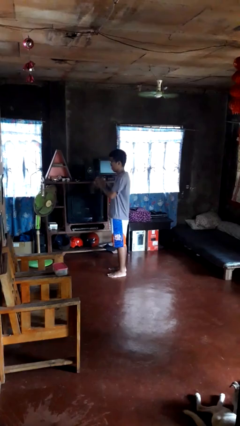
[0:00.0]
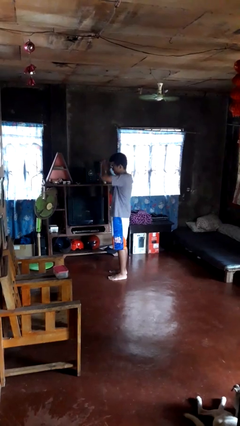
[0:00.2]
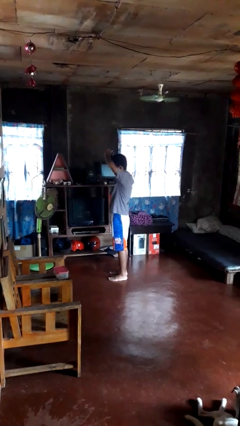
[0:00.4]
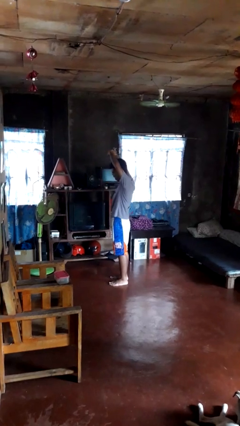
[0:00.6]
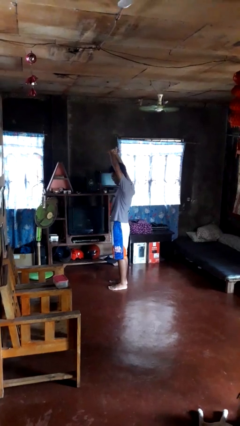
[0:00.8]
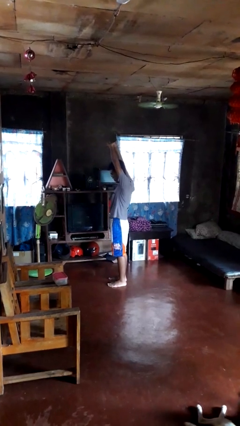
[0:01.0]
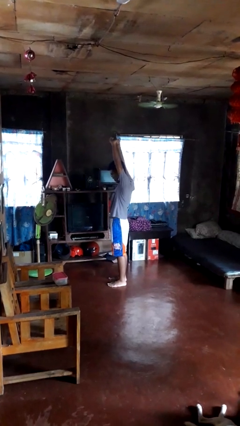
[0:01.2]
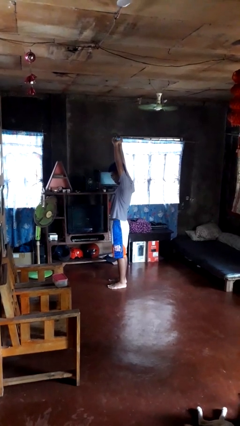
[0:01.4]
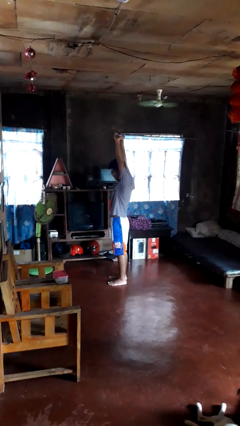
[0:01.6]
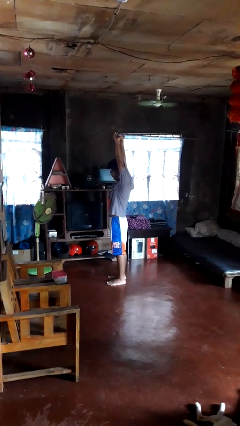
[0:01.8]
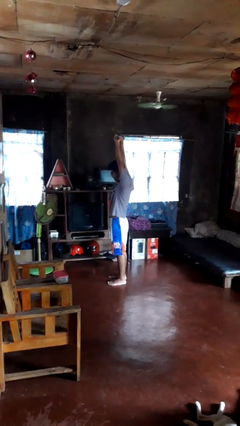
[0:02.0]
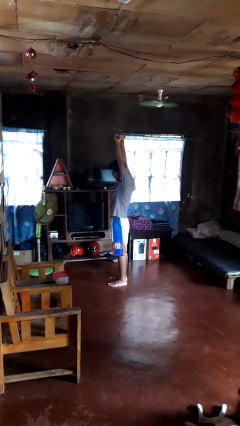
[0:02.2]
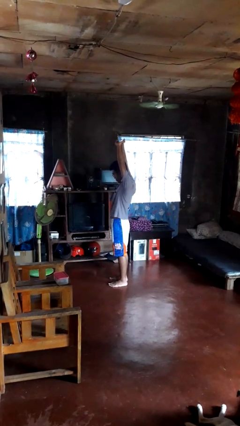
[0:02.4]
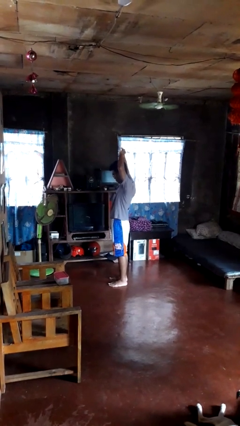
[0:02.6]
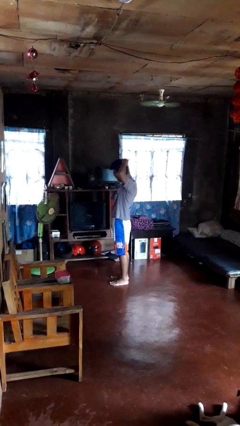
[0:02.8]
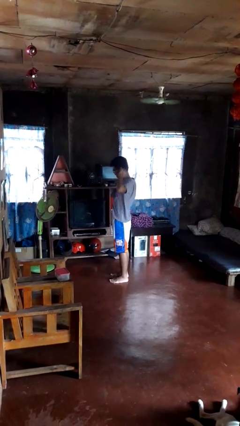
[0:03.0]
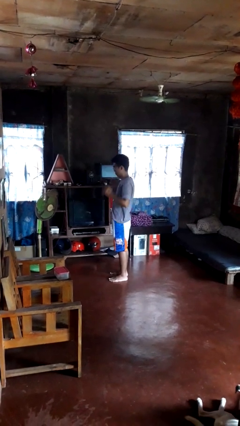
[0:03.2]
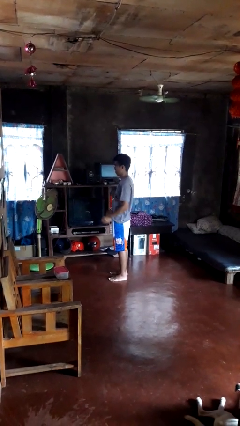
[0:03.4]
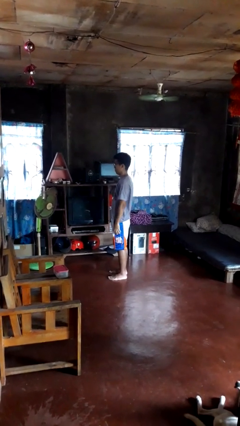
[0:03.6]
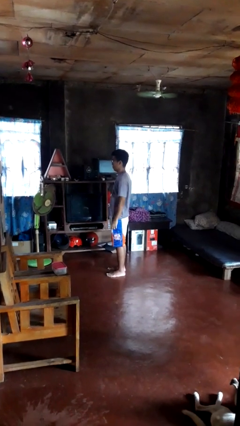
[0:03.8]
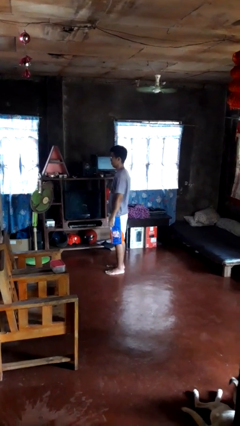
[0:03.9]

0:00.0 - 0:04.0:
person stretches arms over head

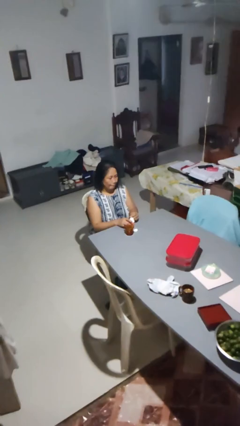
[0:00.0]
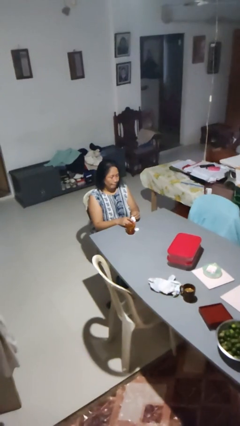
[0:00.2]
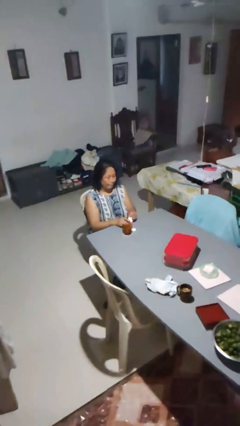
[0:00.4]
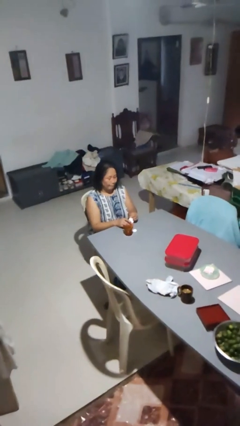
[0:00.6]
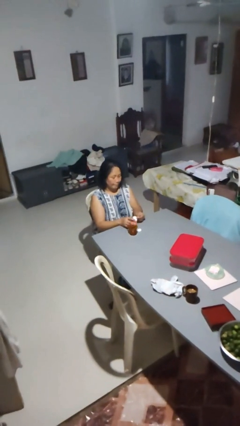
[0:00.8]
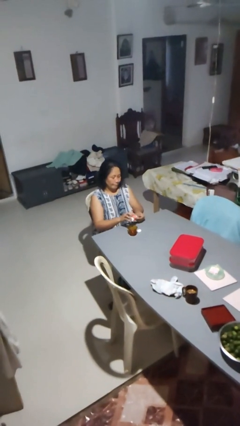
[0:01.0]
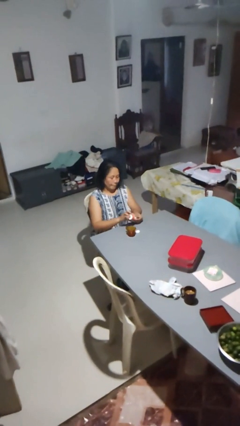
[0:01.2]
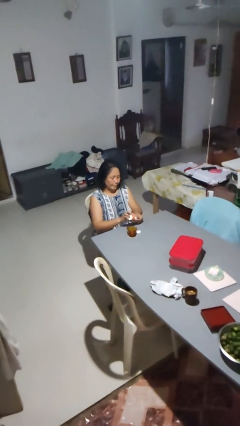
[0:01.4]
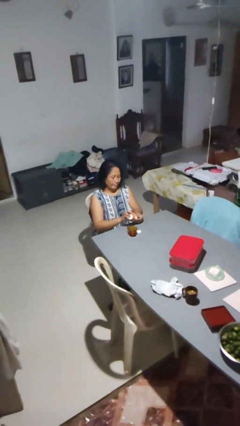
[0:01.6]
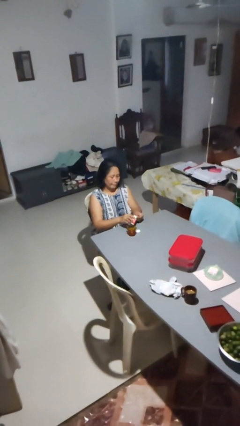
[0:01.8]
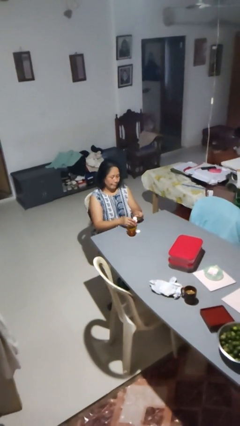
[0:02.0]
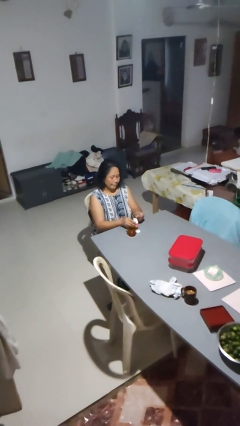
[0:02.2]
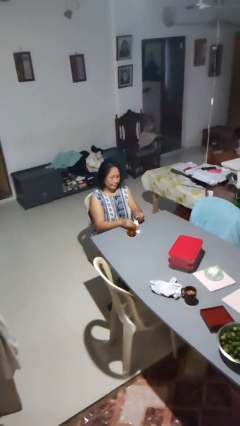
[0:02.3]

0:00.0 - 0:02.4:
person takes medicine pills

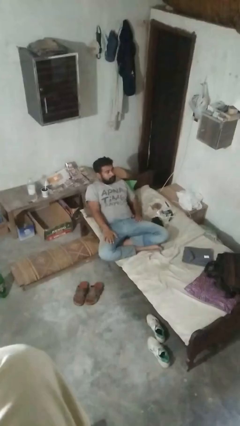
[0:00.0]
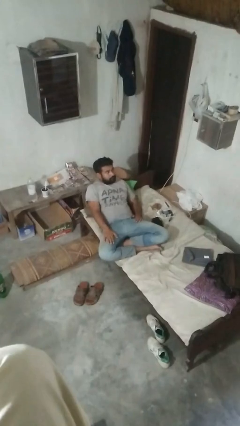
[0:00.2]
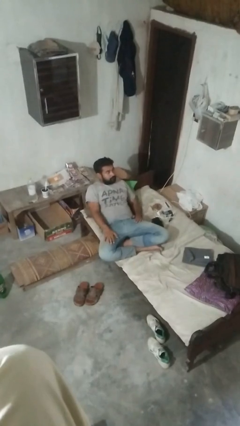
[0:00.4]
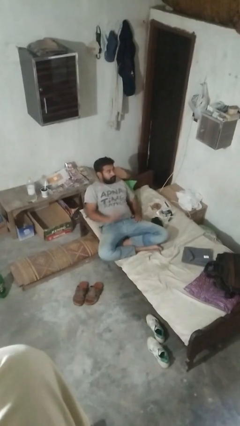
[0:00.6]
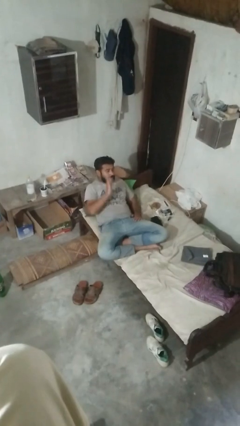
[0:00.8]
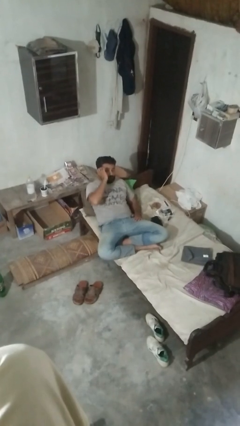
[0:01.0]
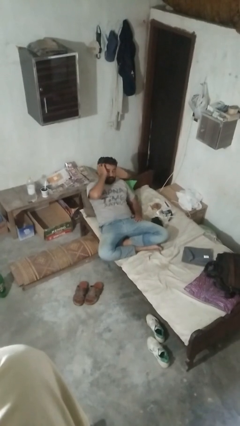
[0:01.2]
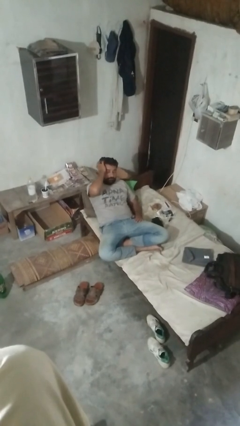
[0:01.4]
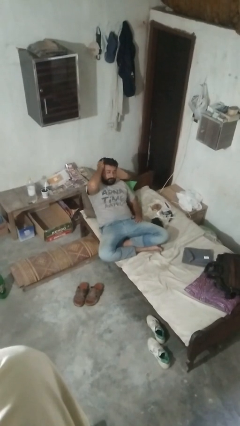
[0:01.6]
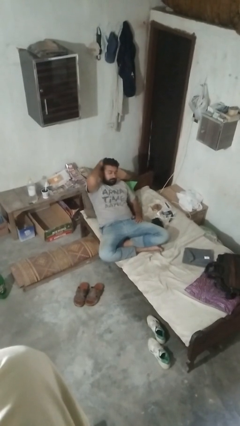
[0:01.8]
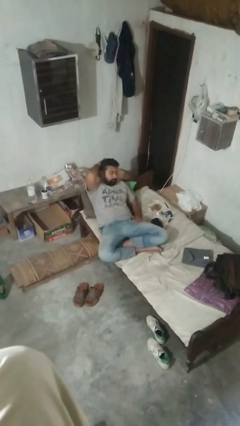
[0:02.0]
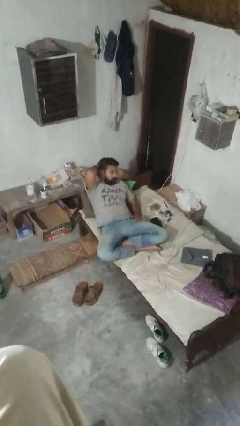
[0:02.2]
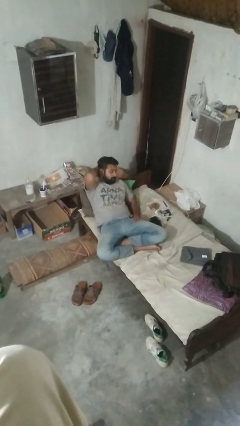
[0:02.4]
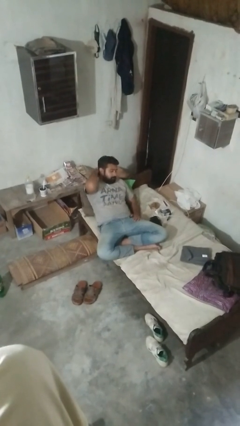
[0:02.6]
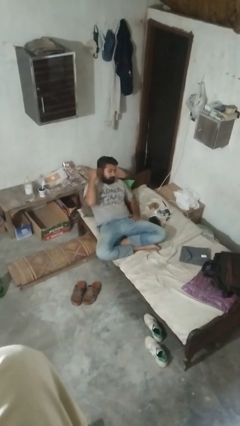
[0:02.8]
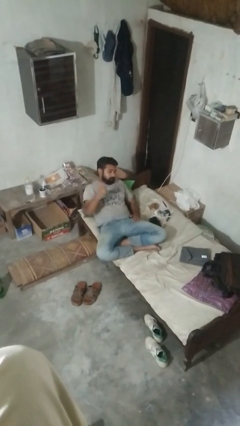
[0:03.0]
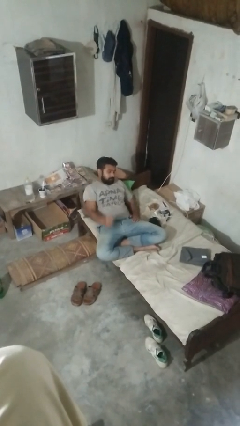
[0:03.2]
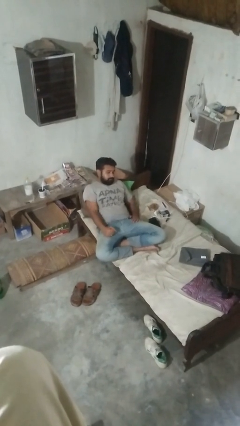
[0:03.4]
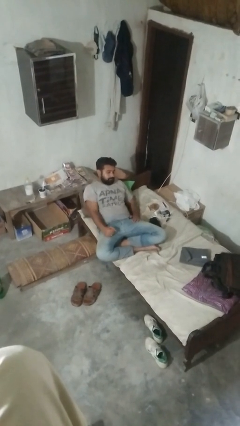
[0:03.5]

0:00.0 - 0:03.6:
person strokes hair

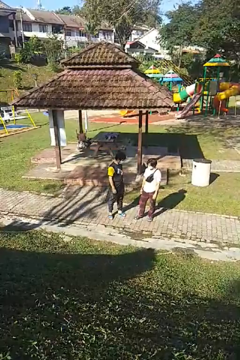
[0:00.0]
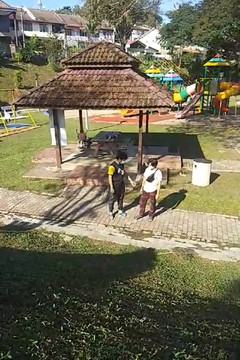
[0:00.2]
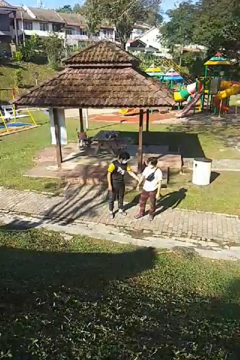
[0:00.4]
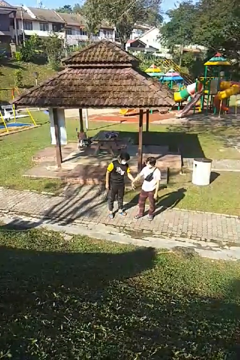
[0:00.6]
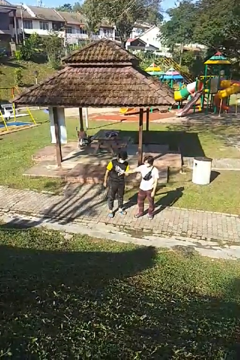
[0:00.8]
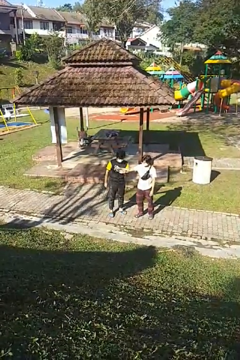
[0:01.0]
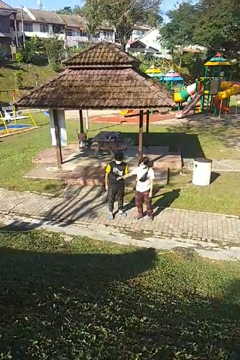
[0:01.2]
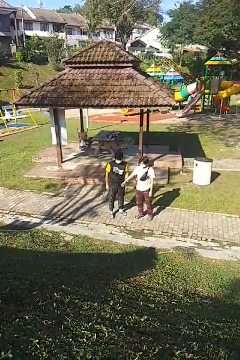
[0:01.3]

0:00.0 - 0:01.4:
person grabs person by forearm

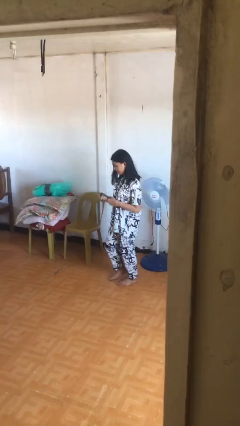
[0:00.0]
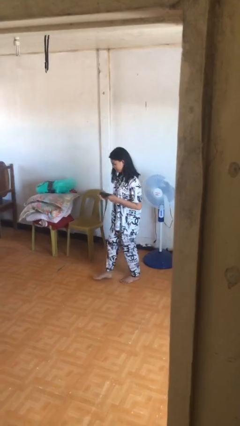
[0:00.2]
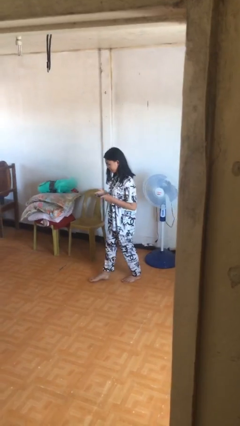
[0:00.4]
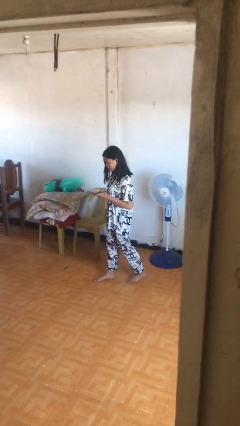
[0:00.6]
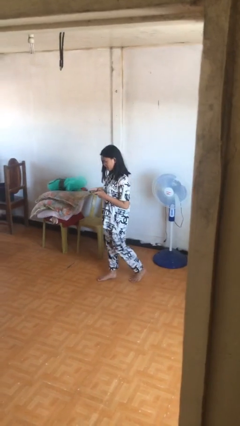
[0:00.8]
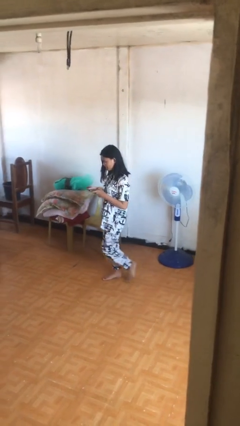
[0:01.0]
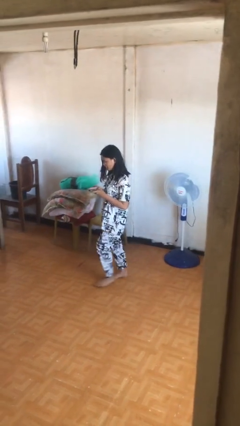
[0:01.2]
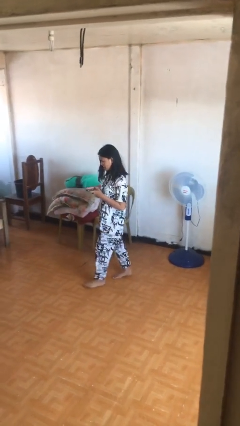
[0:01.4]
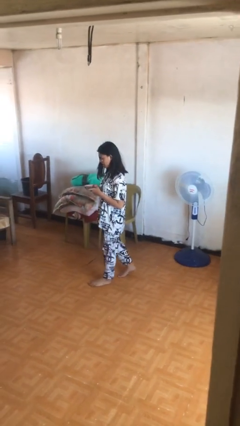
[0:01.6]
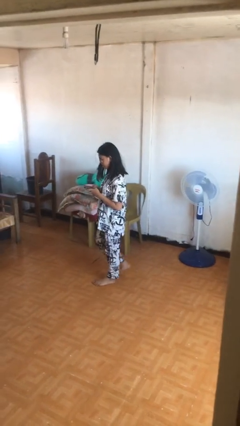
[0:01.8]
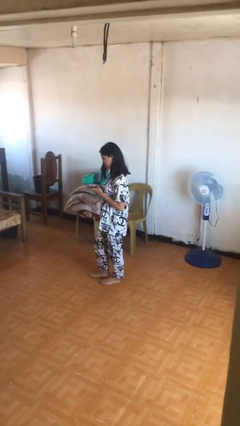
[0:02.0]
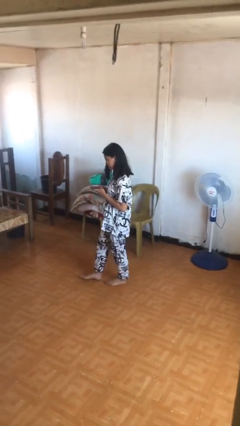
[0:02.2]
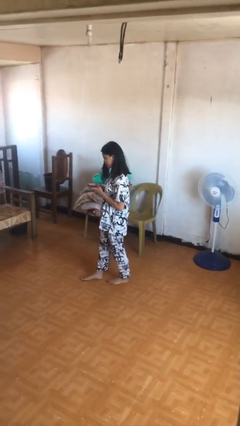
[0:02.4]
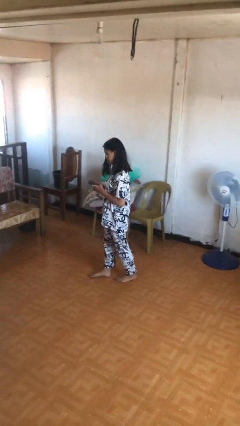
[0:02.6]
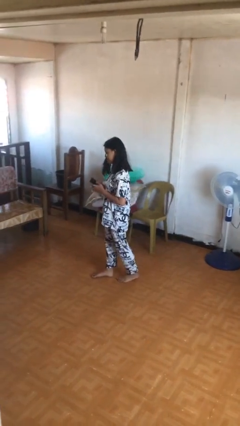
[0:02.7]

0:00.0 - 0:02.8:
person texts on phone

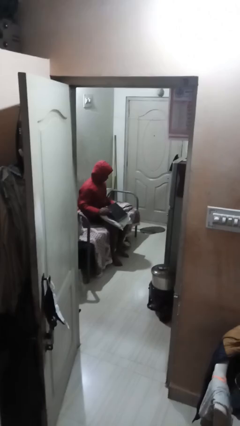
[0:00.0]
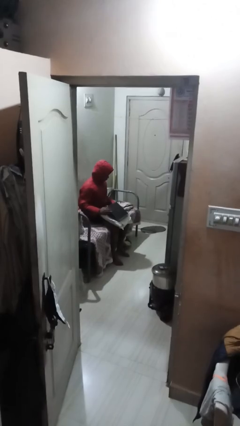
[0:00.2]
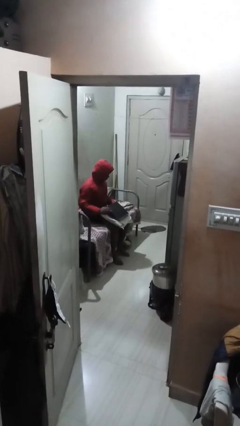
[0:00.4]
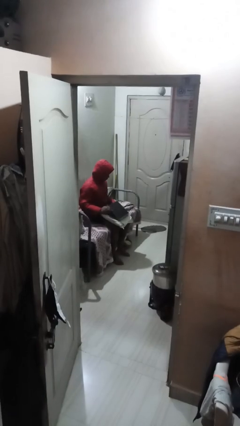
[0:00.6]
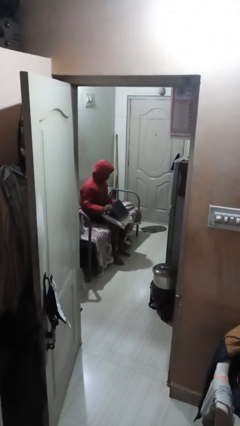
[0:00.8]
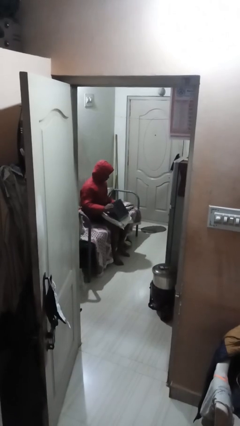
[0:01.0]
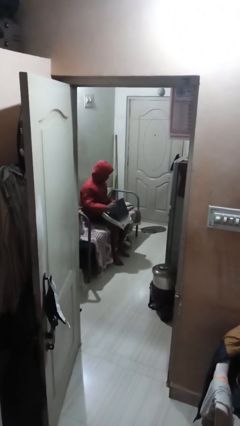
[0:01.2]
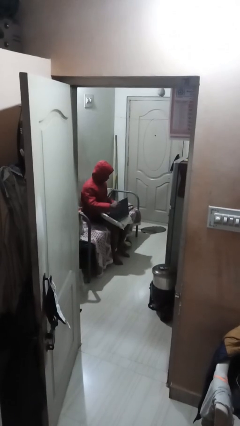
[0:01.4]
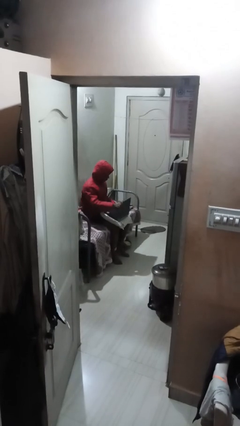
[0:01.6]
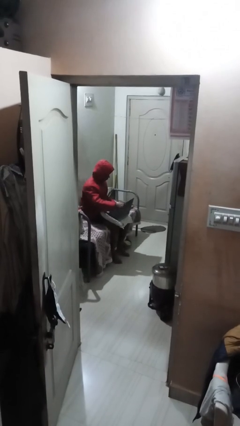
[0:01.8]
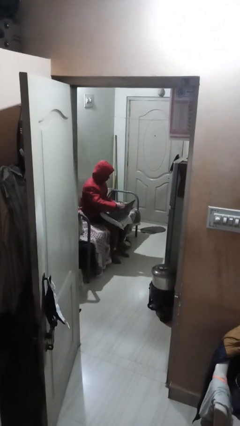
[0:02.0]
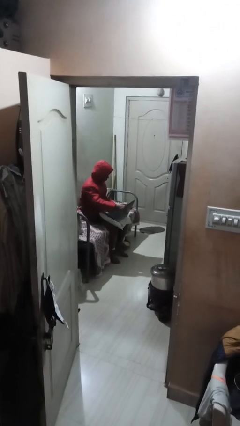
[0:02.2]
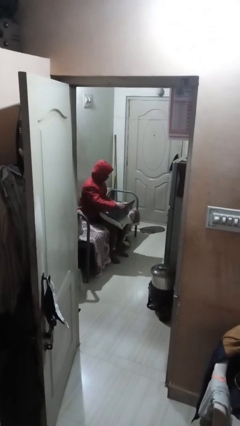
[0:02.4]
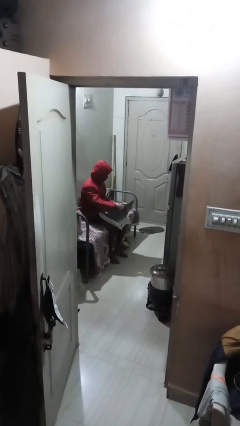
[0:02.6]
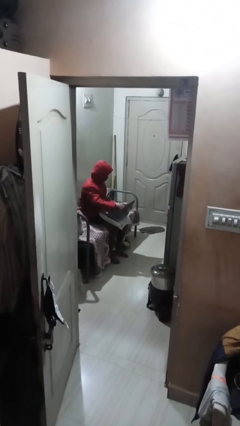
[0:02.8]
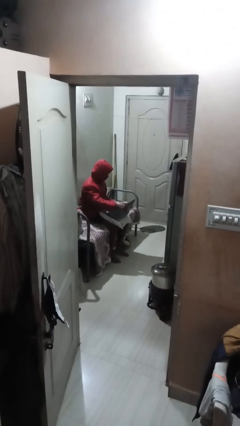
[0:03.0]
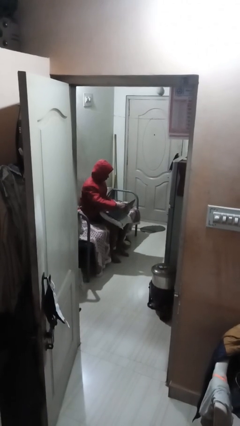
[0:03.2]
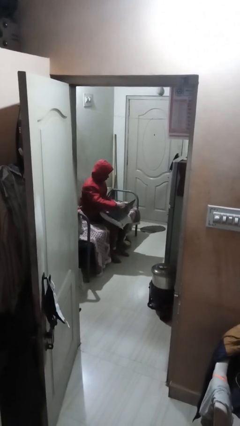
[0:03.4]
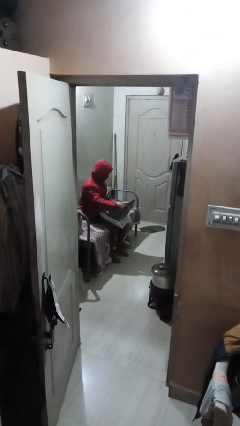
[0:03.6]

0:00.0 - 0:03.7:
person interacts with laptop
